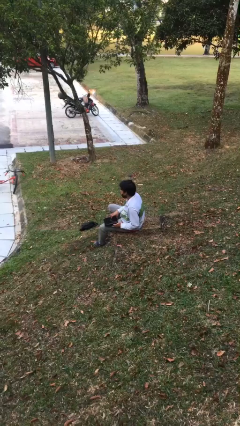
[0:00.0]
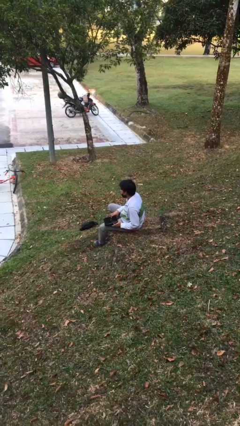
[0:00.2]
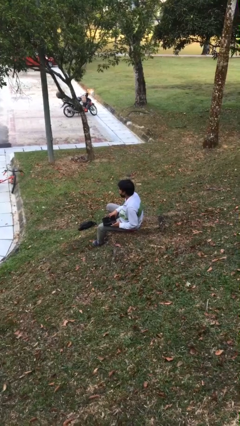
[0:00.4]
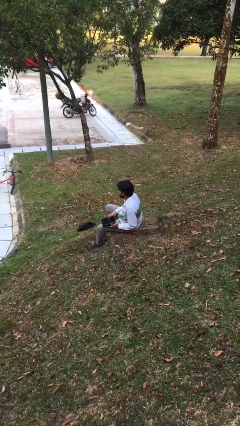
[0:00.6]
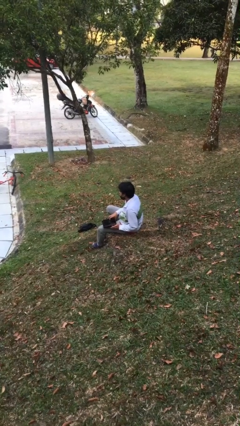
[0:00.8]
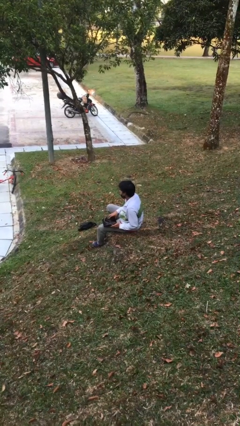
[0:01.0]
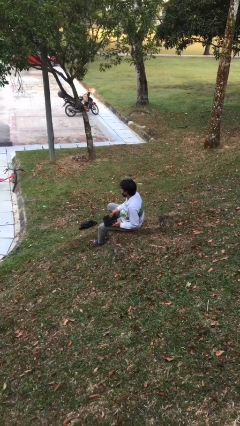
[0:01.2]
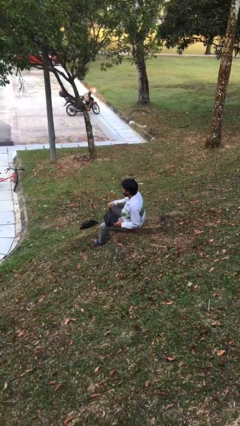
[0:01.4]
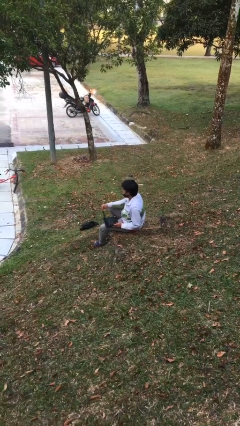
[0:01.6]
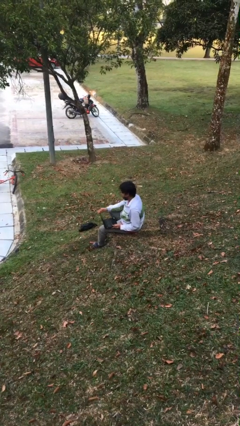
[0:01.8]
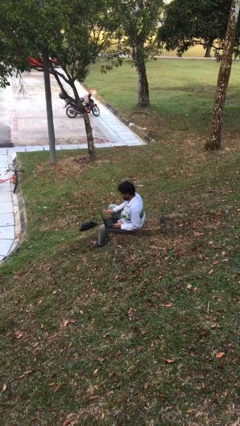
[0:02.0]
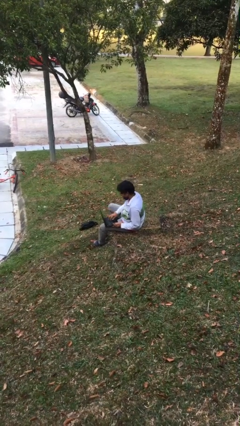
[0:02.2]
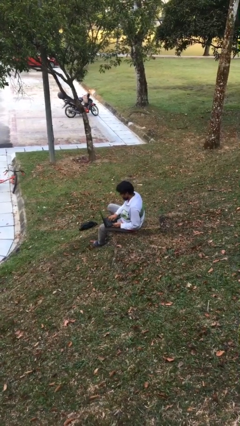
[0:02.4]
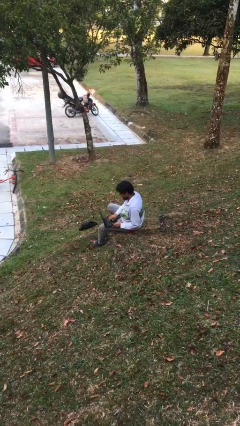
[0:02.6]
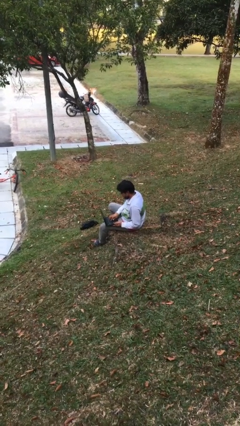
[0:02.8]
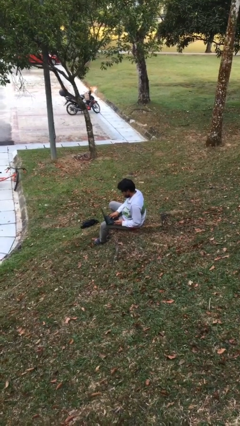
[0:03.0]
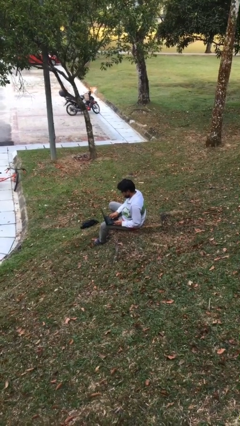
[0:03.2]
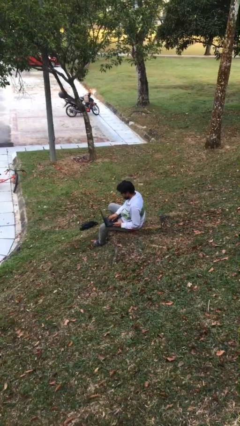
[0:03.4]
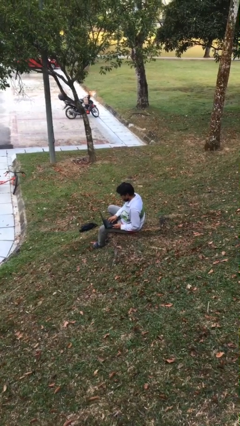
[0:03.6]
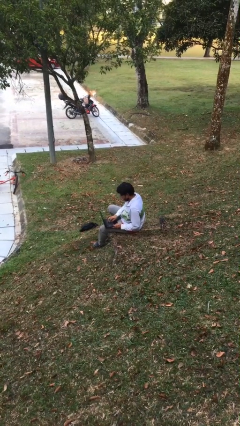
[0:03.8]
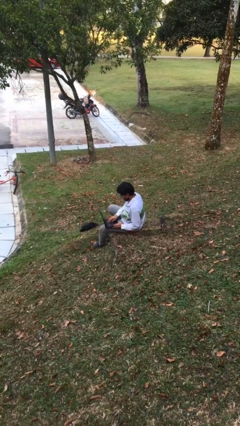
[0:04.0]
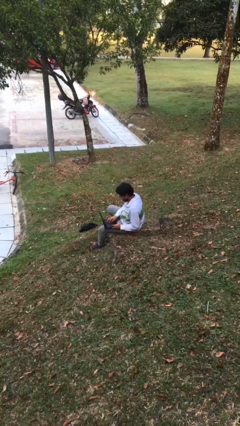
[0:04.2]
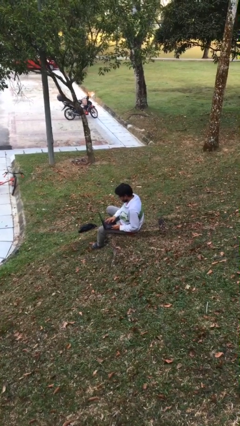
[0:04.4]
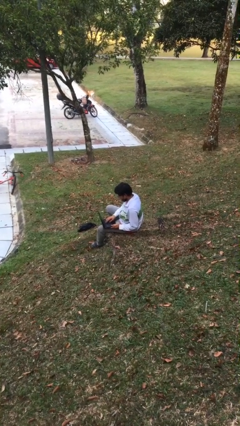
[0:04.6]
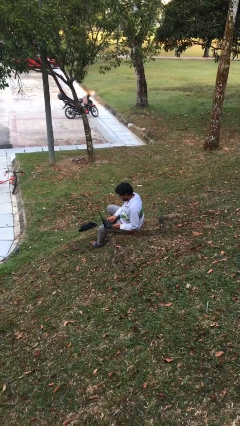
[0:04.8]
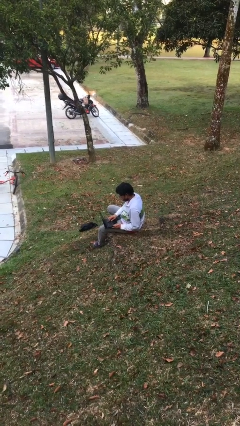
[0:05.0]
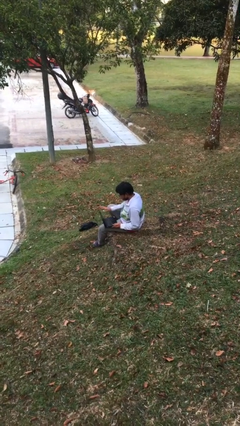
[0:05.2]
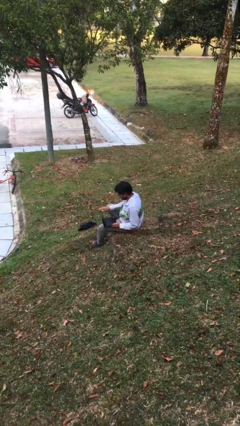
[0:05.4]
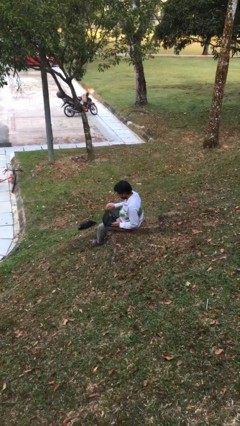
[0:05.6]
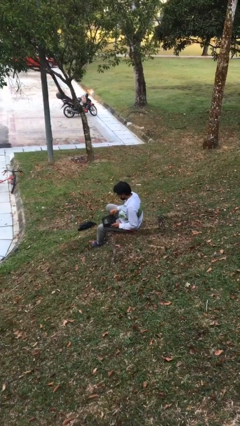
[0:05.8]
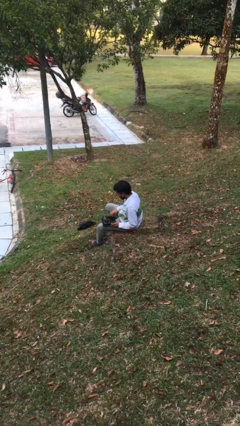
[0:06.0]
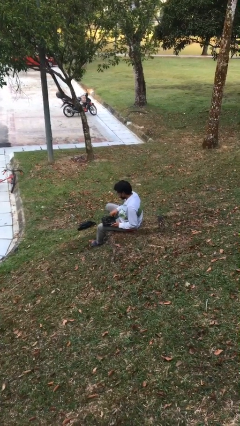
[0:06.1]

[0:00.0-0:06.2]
person interacts with laptop

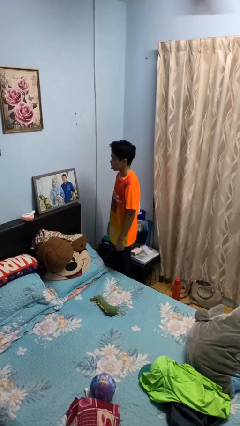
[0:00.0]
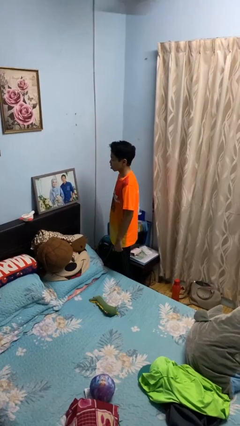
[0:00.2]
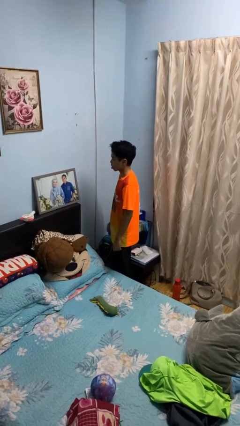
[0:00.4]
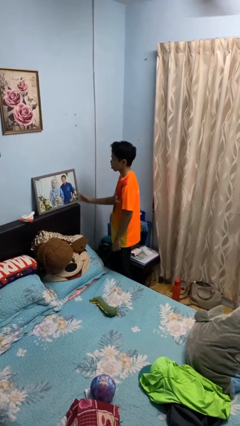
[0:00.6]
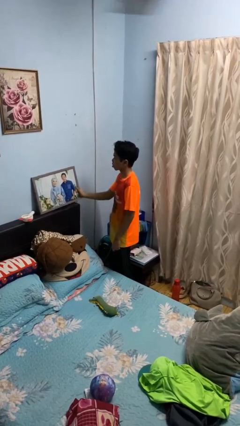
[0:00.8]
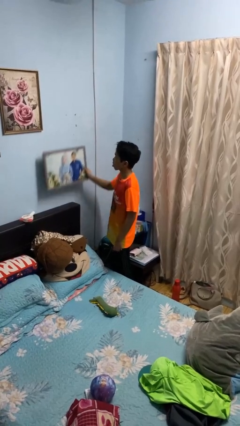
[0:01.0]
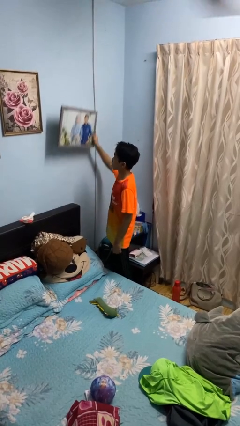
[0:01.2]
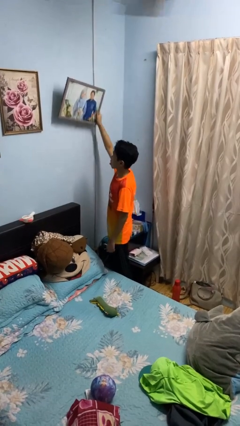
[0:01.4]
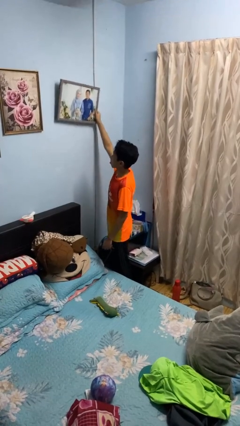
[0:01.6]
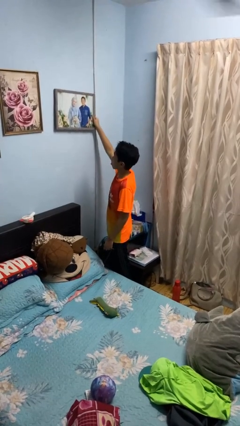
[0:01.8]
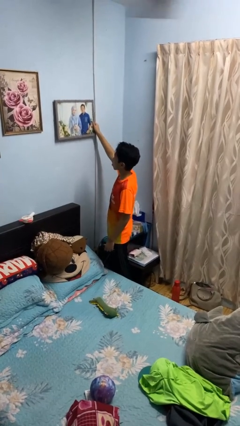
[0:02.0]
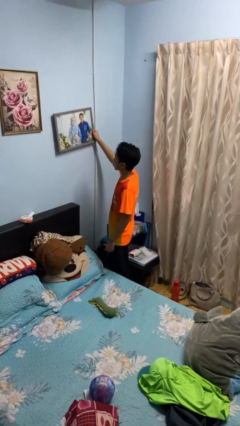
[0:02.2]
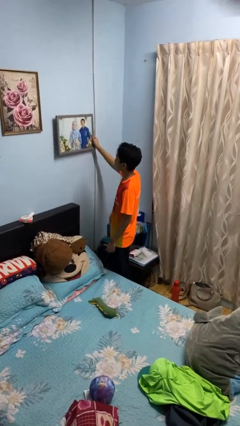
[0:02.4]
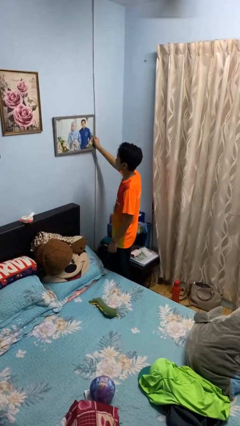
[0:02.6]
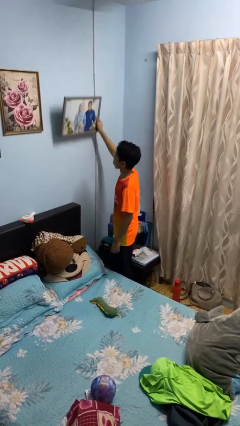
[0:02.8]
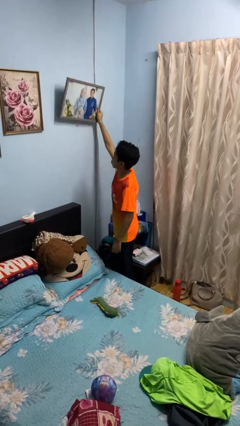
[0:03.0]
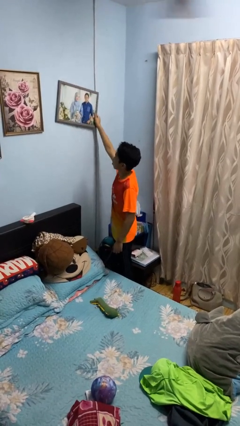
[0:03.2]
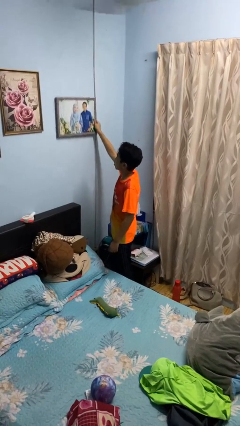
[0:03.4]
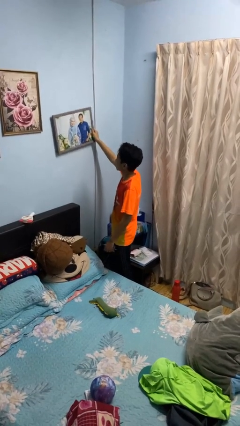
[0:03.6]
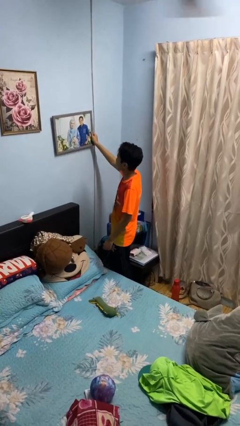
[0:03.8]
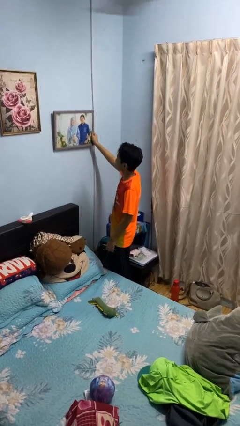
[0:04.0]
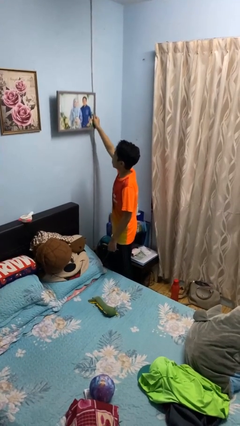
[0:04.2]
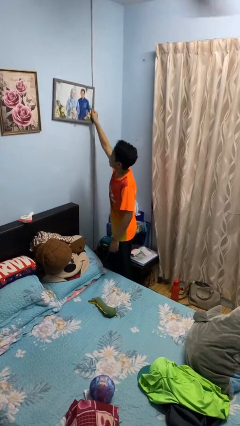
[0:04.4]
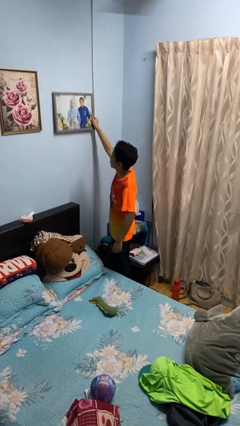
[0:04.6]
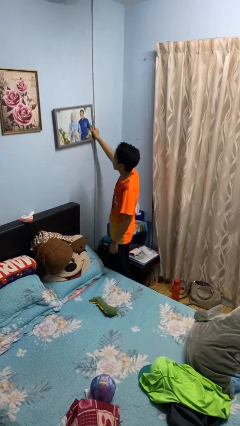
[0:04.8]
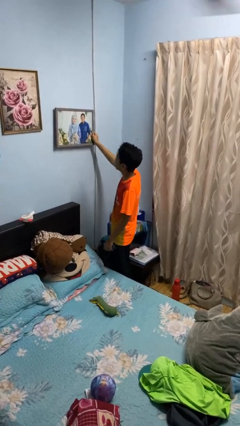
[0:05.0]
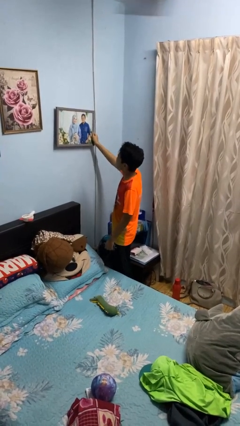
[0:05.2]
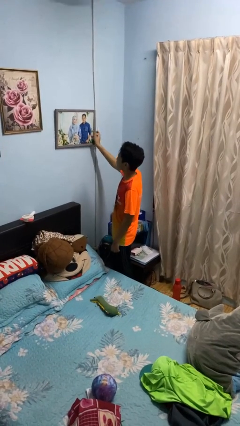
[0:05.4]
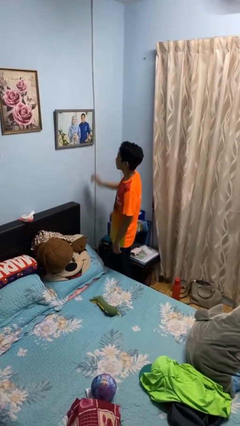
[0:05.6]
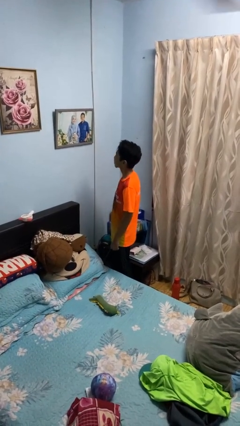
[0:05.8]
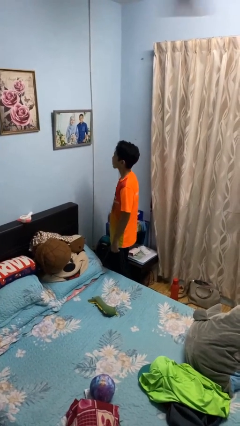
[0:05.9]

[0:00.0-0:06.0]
person puts up picture frame

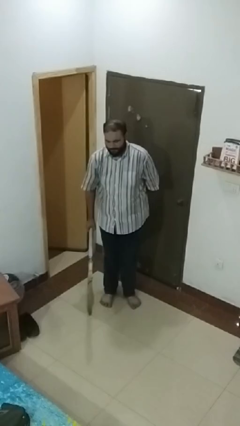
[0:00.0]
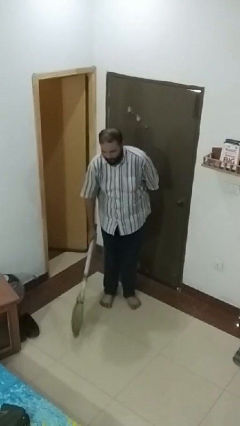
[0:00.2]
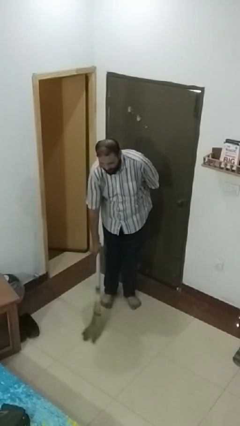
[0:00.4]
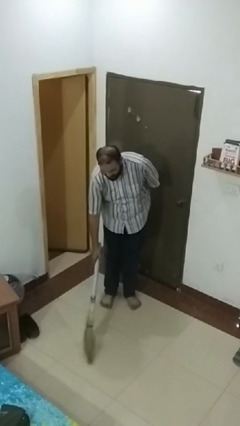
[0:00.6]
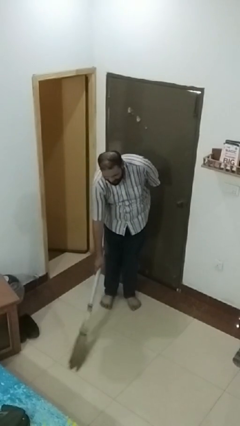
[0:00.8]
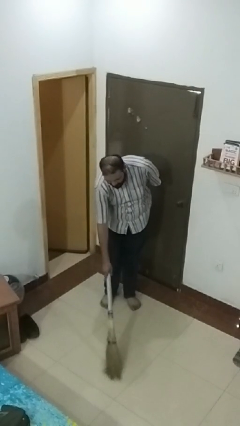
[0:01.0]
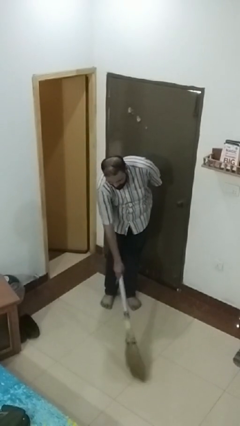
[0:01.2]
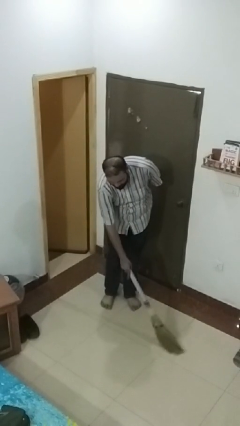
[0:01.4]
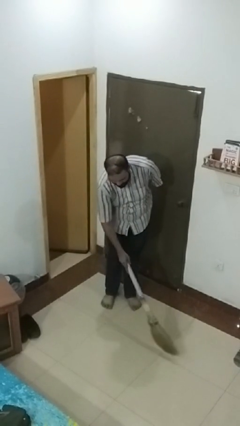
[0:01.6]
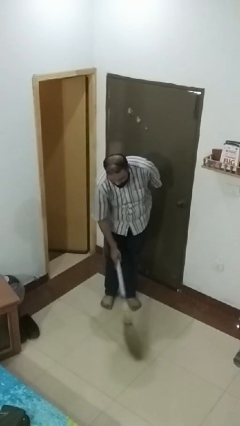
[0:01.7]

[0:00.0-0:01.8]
person sweeps floor

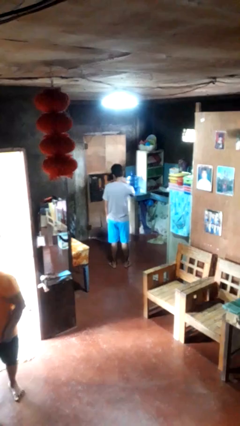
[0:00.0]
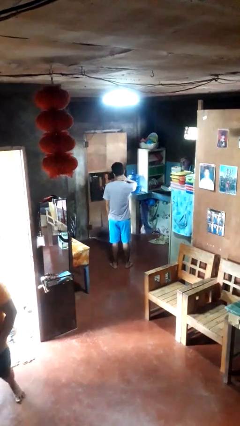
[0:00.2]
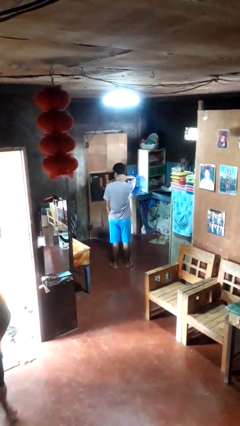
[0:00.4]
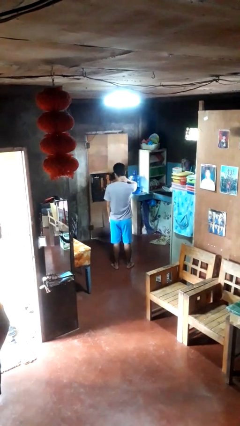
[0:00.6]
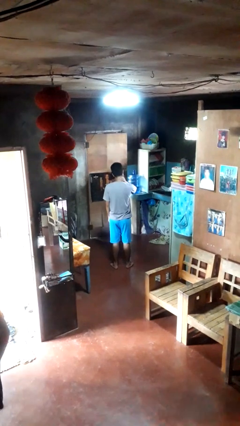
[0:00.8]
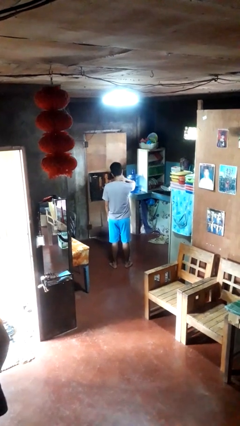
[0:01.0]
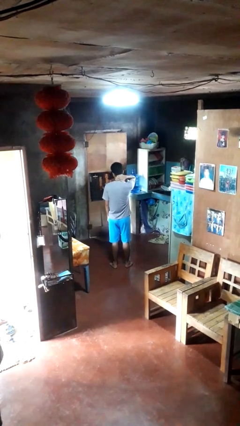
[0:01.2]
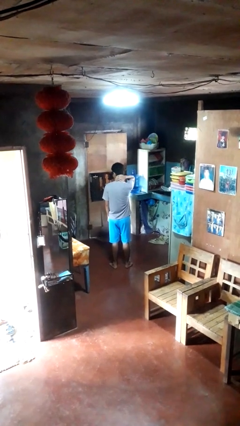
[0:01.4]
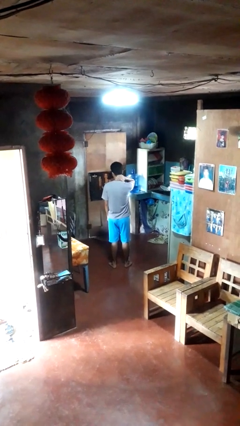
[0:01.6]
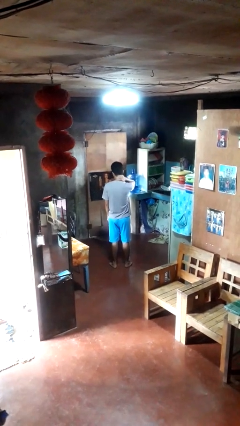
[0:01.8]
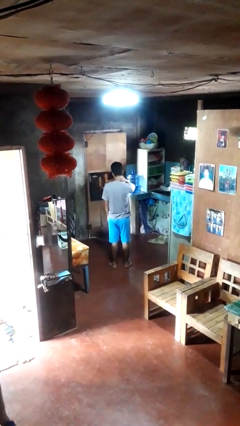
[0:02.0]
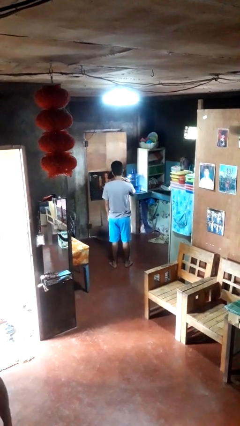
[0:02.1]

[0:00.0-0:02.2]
person rubs neck

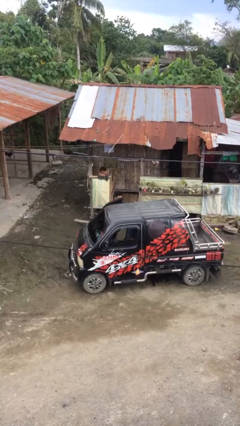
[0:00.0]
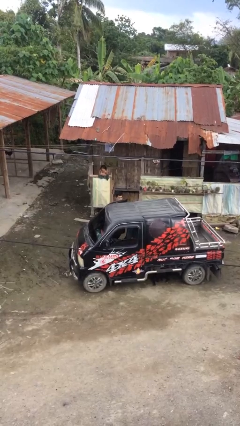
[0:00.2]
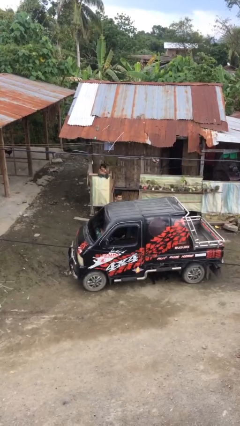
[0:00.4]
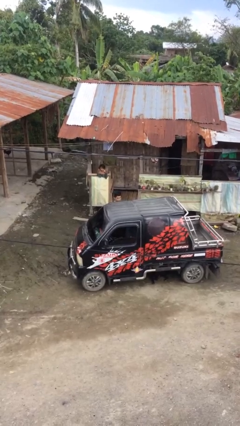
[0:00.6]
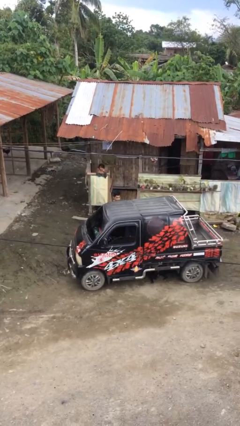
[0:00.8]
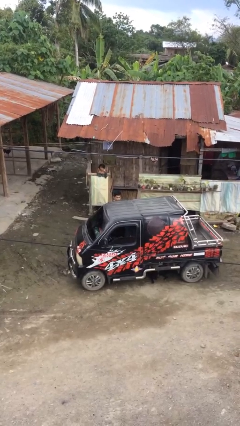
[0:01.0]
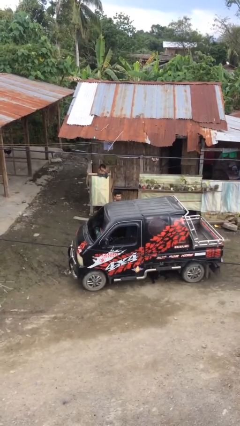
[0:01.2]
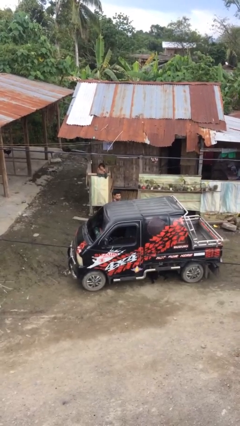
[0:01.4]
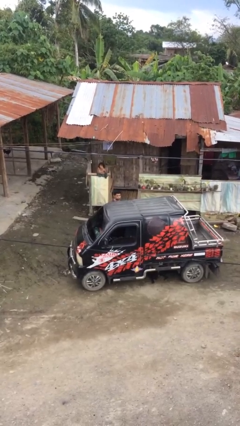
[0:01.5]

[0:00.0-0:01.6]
person closes car door
